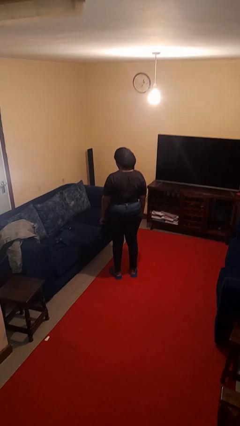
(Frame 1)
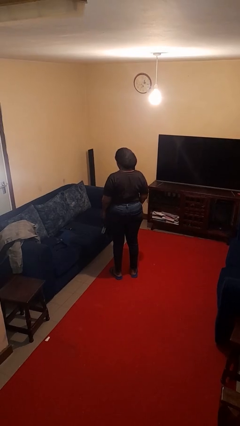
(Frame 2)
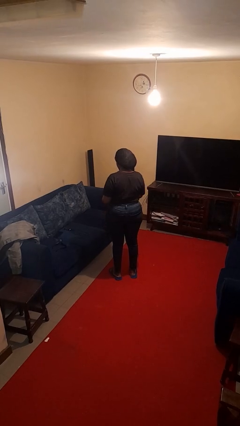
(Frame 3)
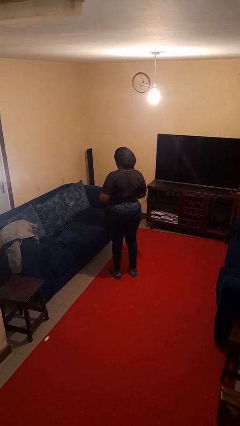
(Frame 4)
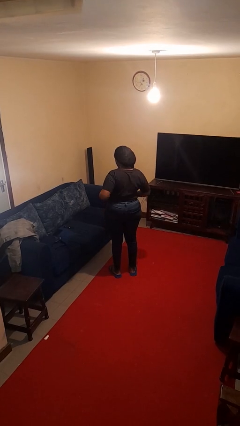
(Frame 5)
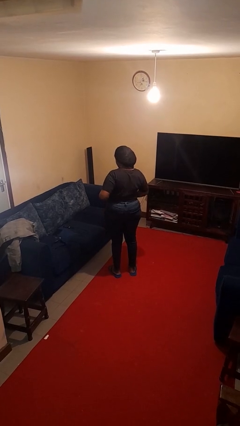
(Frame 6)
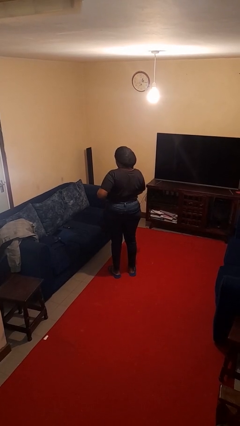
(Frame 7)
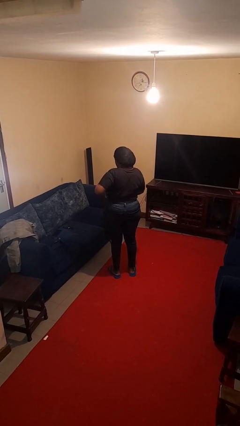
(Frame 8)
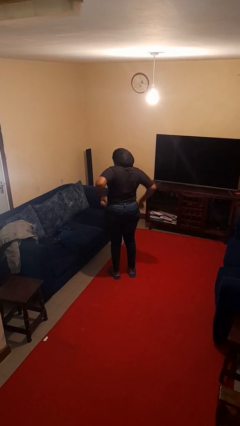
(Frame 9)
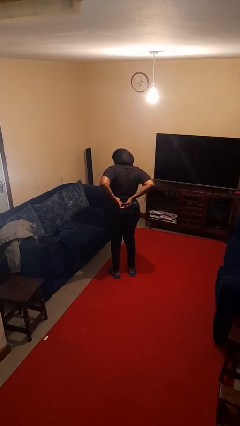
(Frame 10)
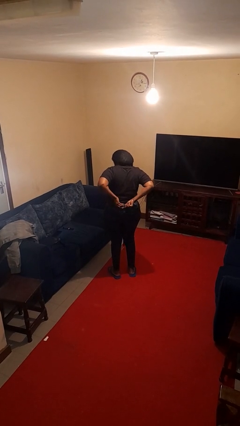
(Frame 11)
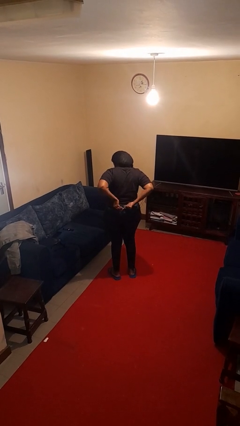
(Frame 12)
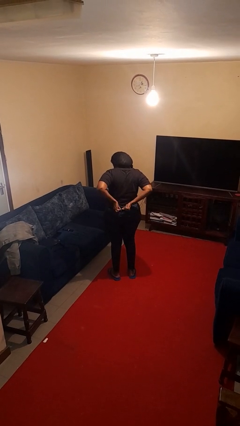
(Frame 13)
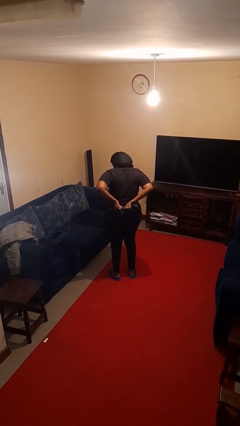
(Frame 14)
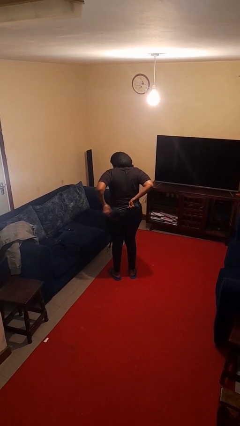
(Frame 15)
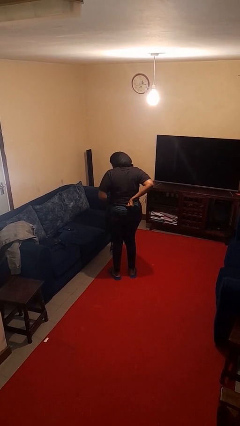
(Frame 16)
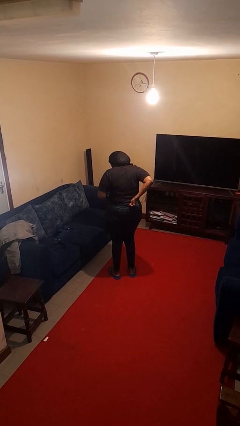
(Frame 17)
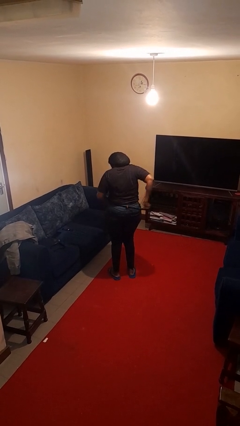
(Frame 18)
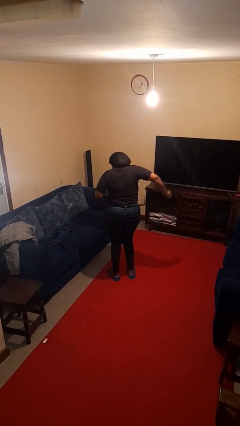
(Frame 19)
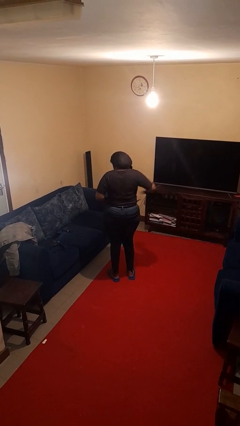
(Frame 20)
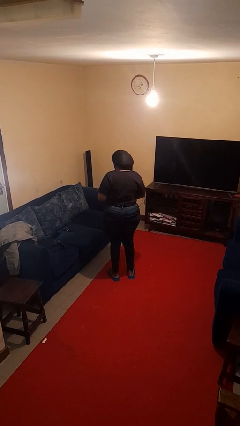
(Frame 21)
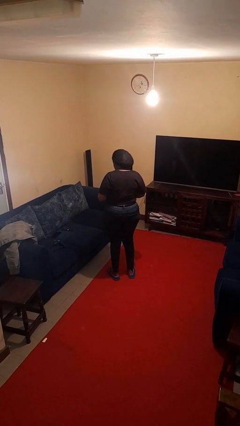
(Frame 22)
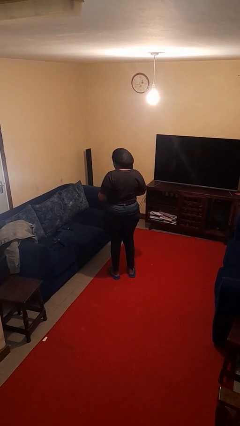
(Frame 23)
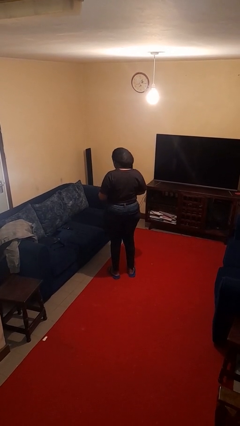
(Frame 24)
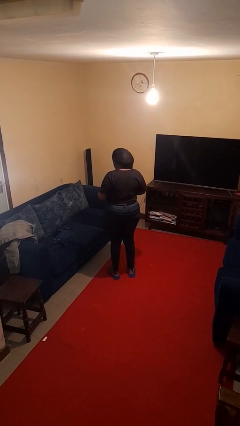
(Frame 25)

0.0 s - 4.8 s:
person puts on belt

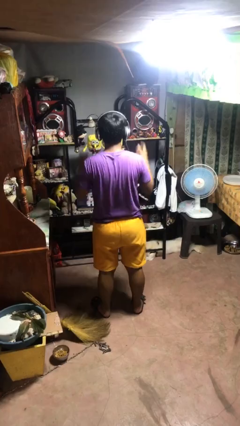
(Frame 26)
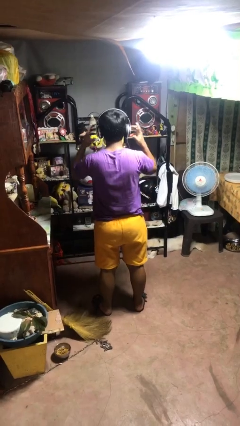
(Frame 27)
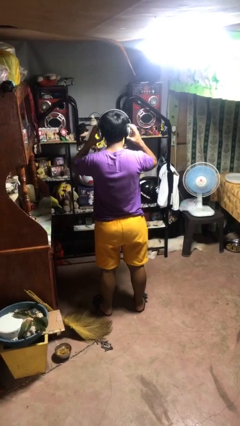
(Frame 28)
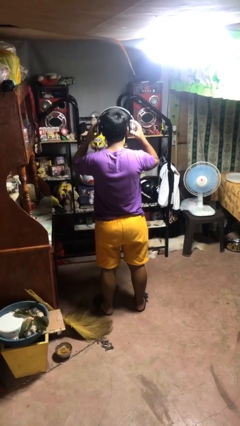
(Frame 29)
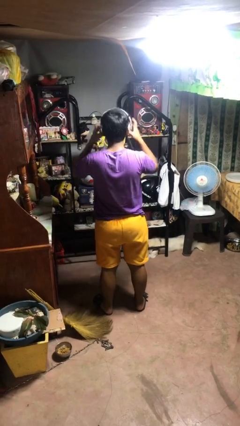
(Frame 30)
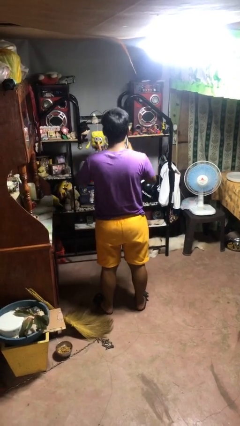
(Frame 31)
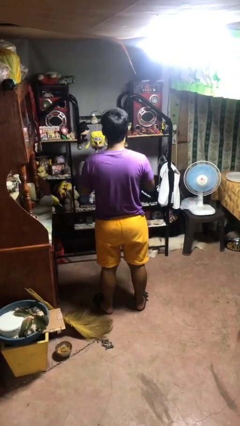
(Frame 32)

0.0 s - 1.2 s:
person takes off headphones

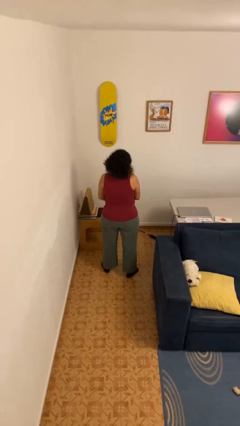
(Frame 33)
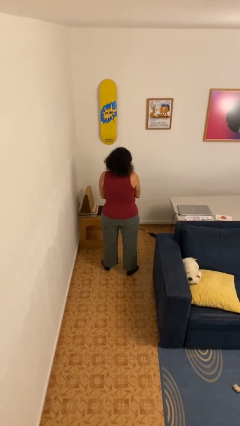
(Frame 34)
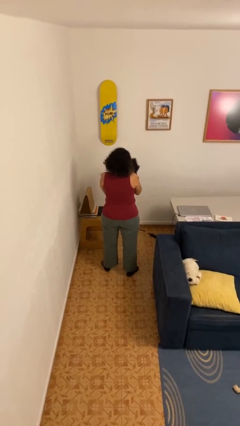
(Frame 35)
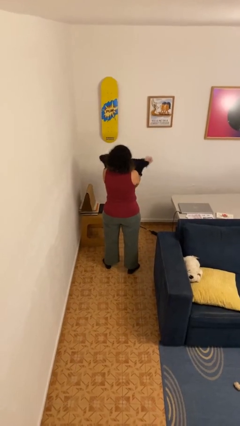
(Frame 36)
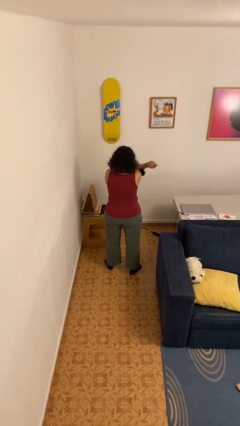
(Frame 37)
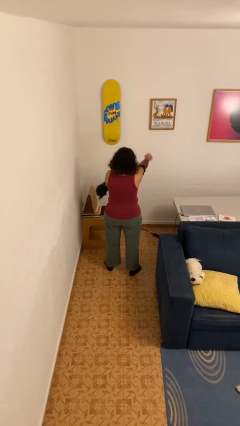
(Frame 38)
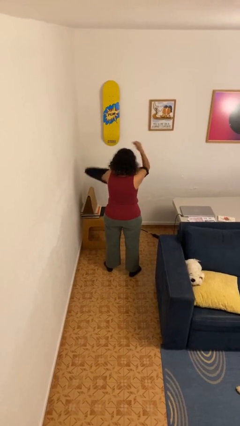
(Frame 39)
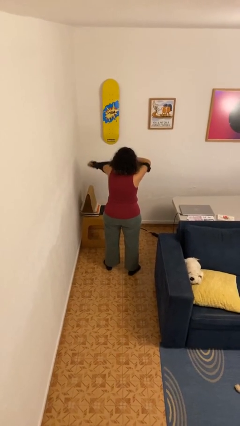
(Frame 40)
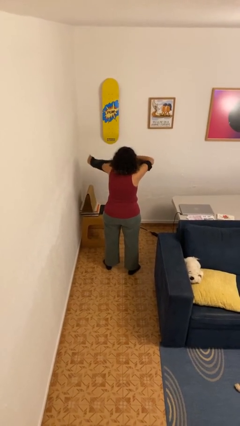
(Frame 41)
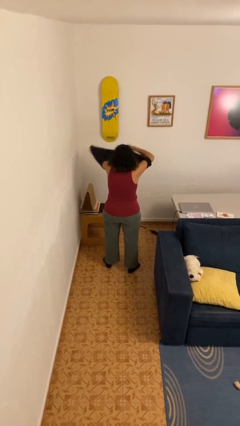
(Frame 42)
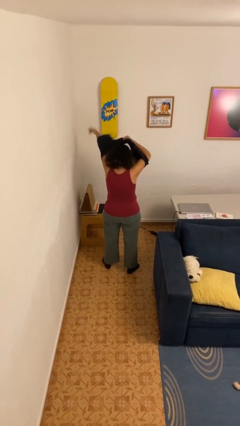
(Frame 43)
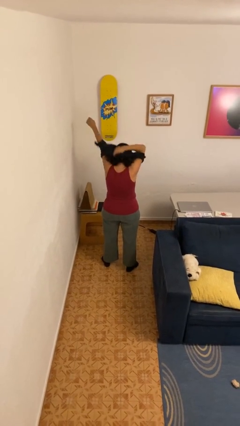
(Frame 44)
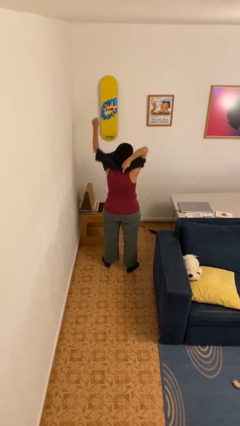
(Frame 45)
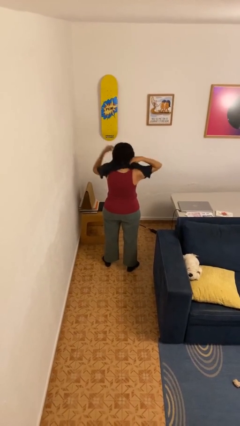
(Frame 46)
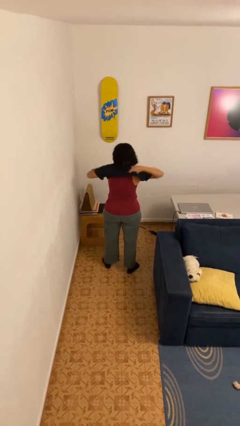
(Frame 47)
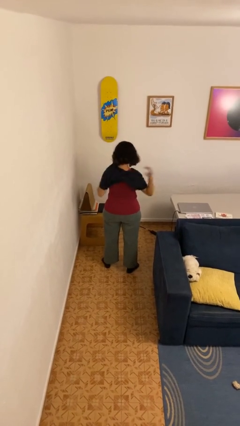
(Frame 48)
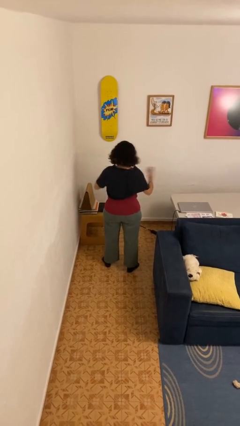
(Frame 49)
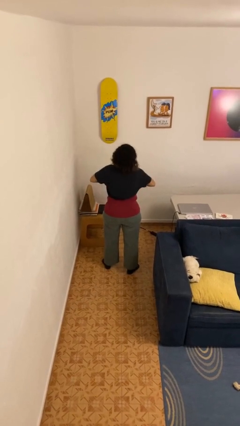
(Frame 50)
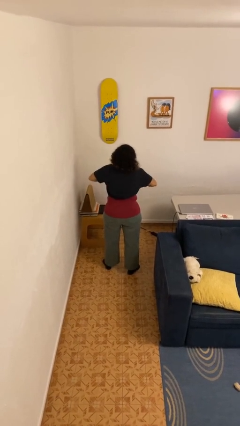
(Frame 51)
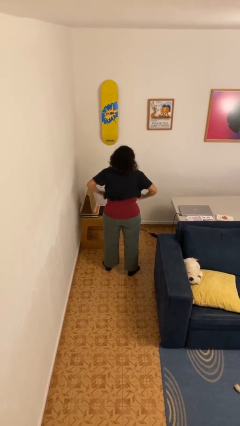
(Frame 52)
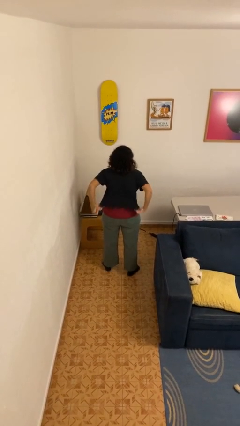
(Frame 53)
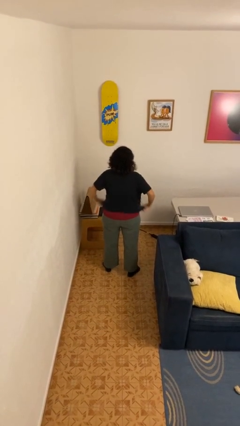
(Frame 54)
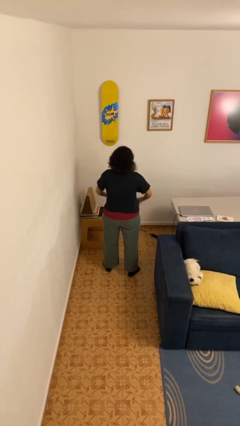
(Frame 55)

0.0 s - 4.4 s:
person puts on shirt

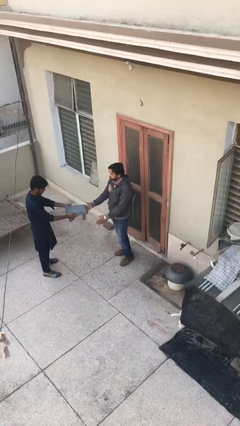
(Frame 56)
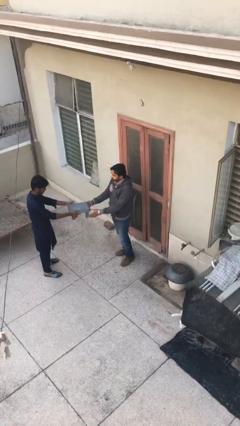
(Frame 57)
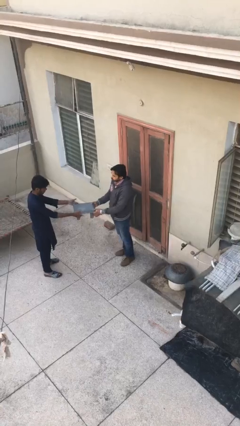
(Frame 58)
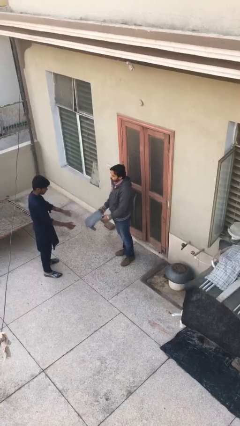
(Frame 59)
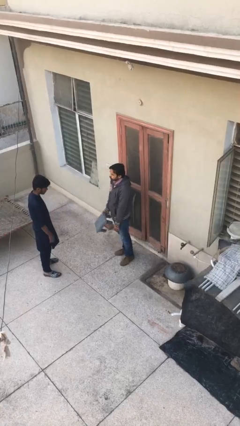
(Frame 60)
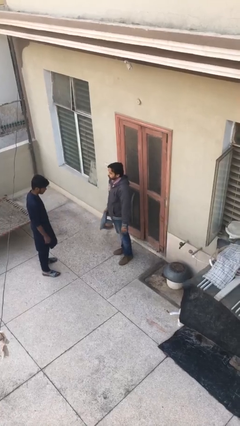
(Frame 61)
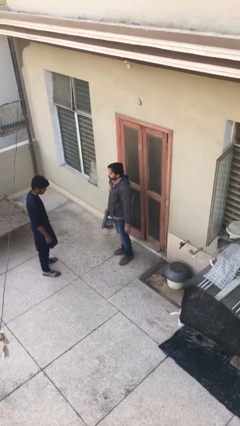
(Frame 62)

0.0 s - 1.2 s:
person transfers object to person

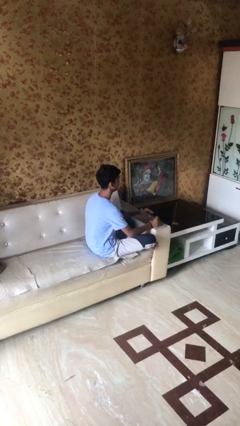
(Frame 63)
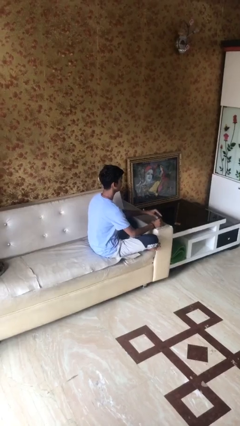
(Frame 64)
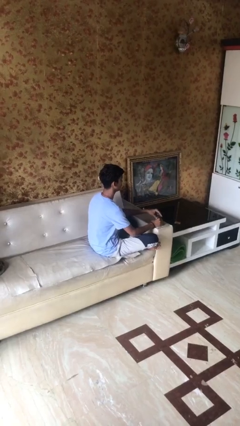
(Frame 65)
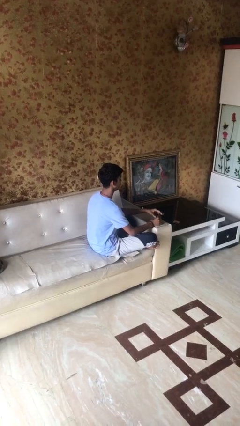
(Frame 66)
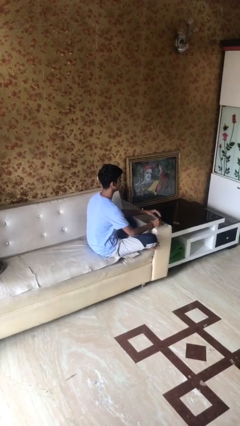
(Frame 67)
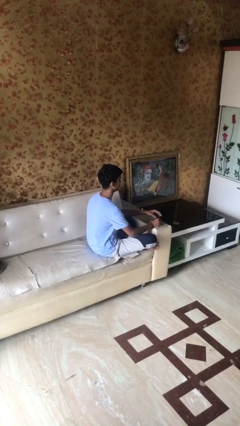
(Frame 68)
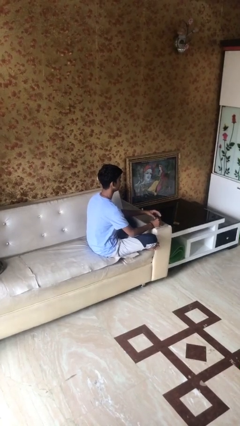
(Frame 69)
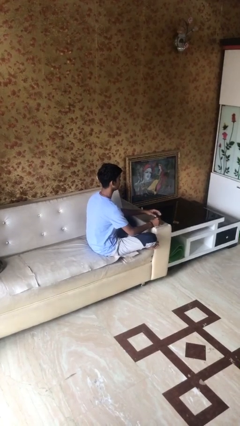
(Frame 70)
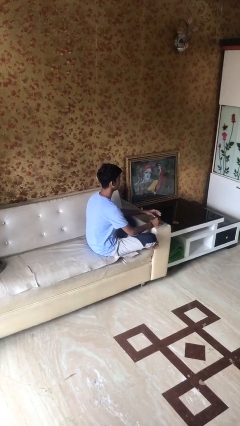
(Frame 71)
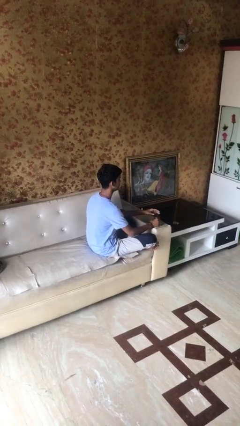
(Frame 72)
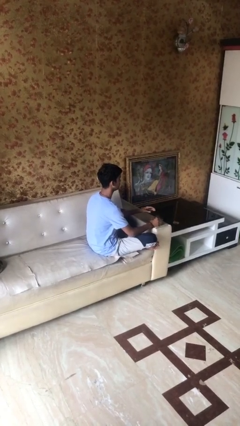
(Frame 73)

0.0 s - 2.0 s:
person closes jar

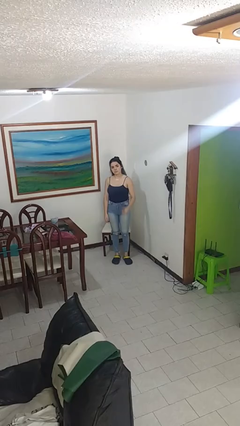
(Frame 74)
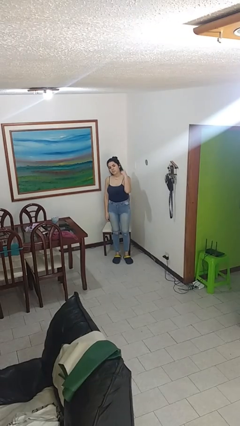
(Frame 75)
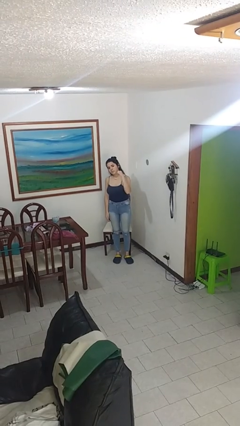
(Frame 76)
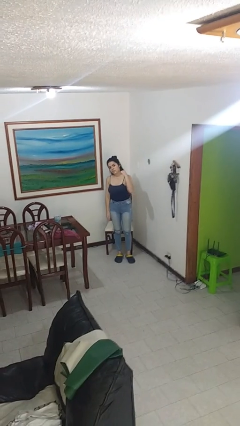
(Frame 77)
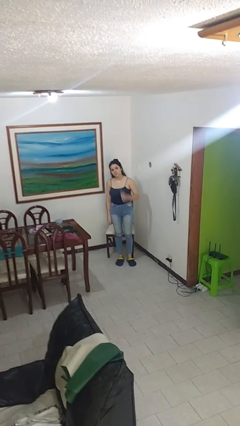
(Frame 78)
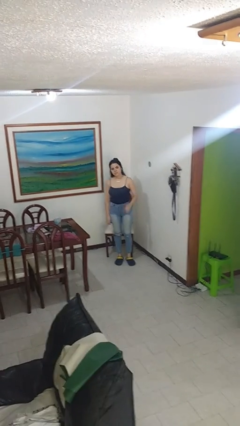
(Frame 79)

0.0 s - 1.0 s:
person gestures behind me

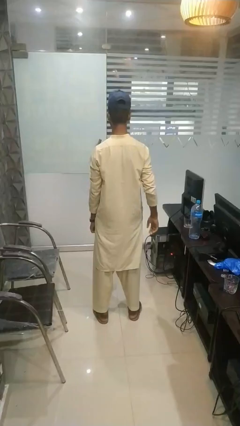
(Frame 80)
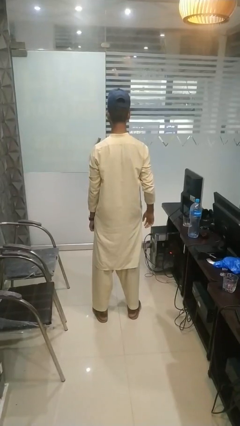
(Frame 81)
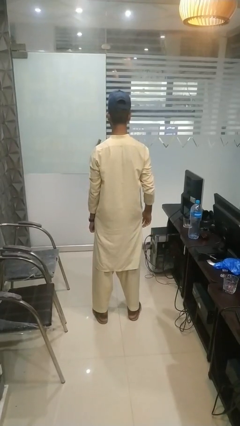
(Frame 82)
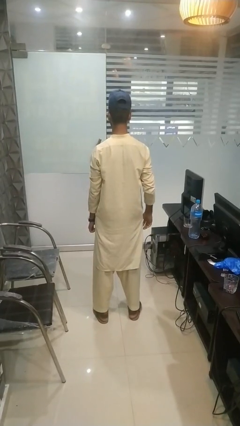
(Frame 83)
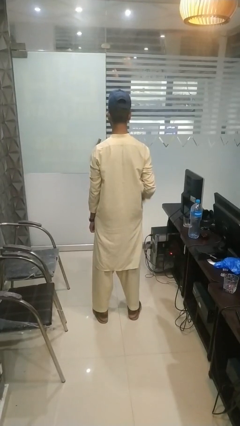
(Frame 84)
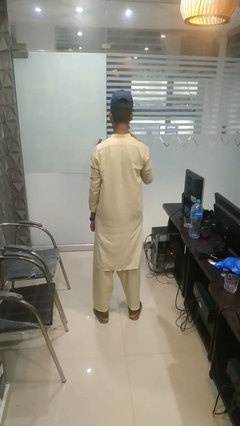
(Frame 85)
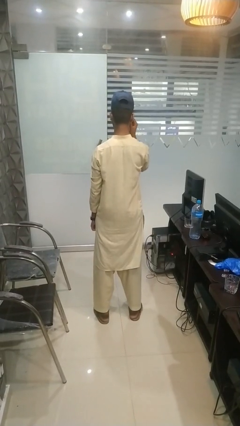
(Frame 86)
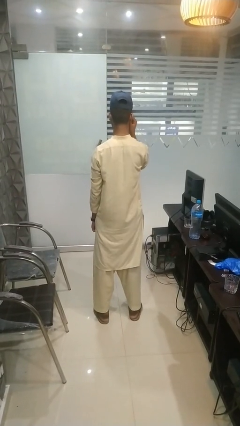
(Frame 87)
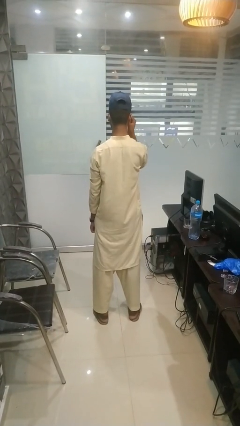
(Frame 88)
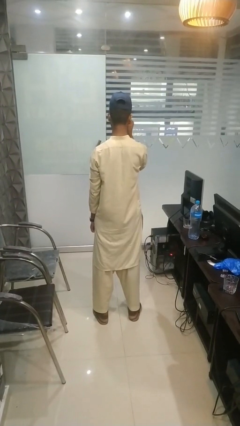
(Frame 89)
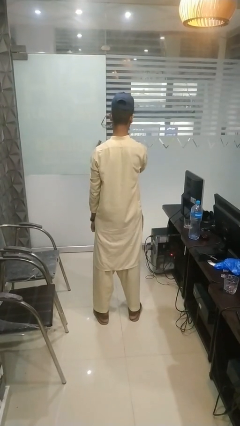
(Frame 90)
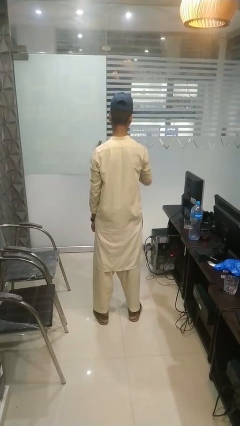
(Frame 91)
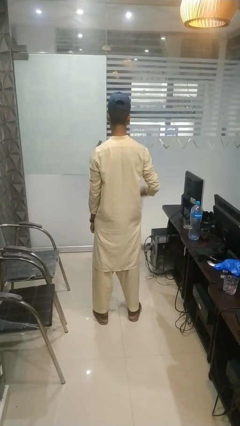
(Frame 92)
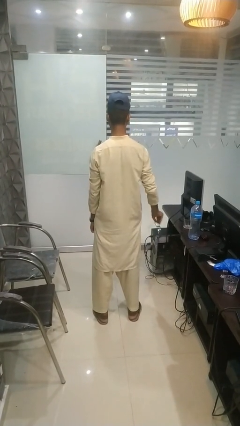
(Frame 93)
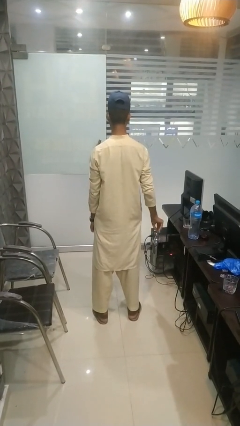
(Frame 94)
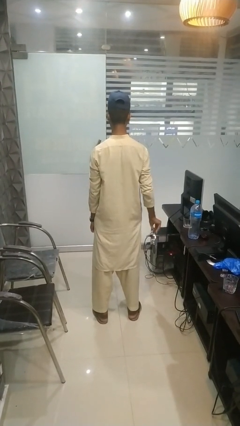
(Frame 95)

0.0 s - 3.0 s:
person takes off glasses
